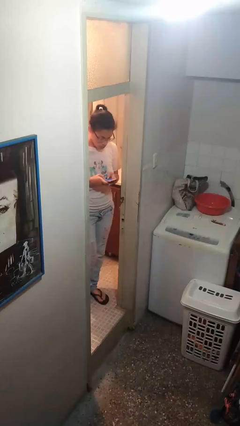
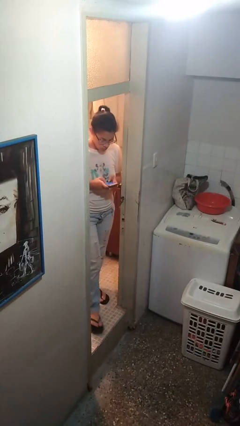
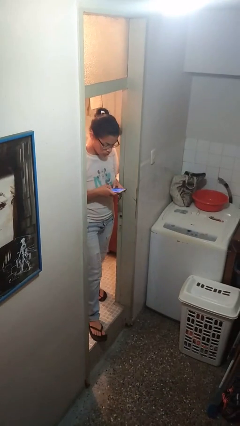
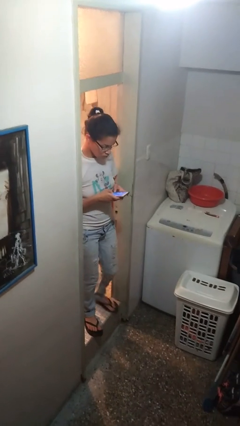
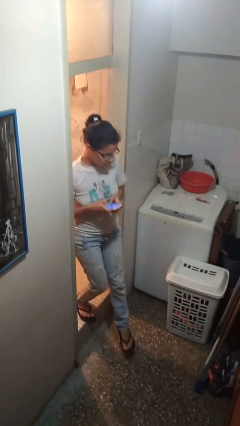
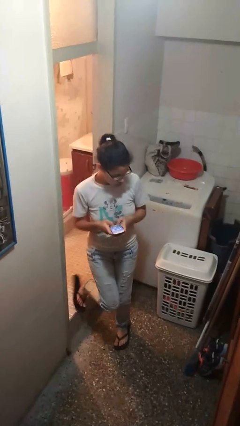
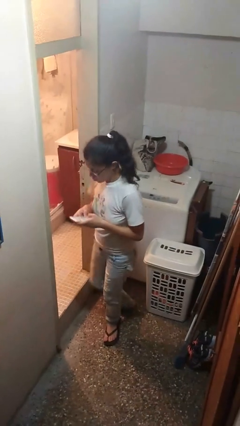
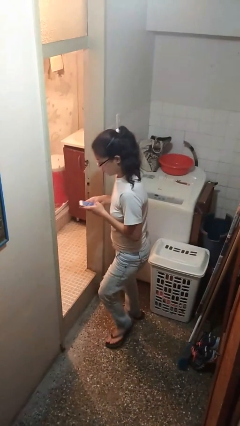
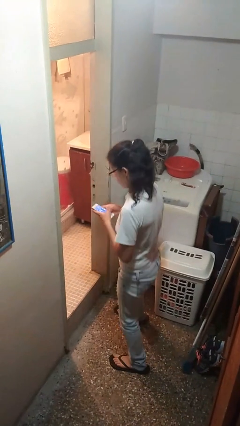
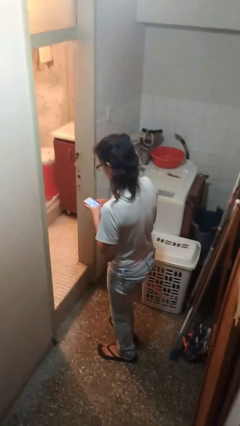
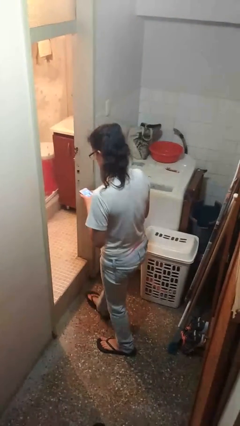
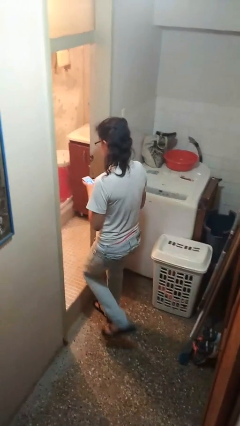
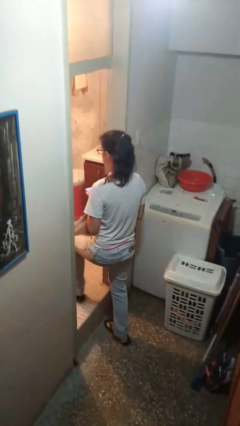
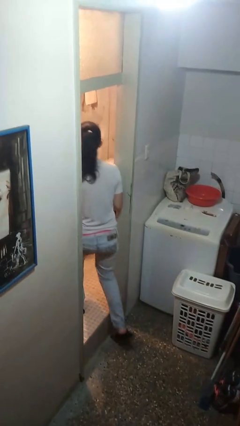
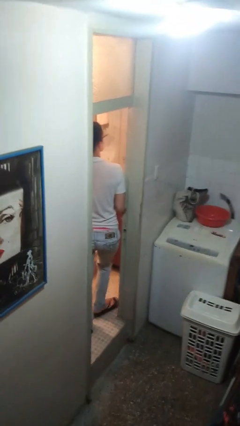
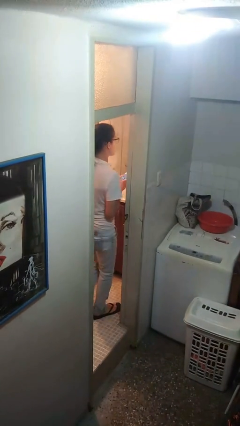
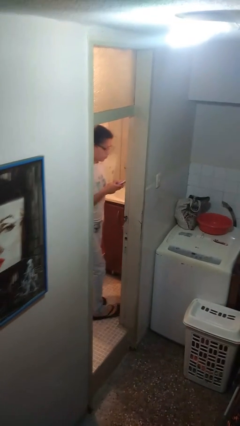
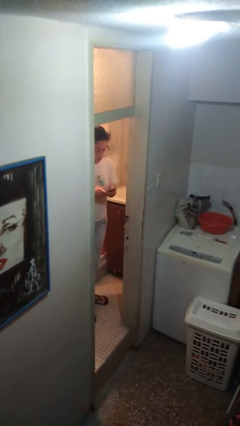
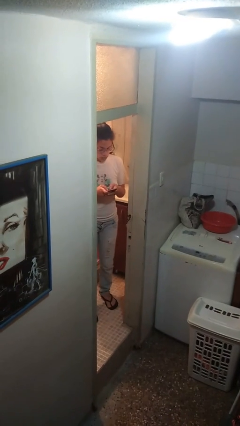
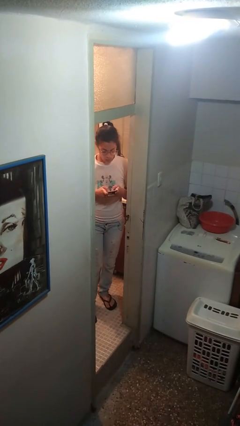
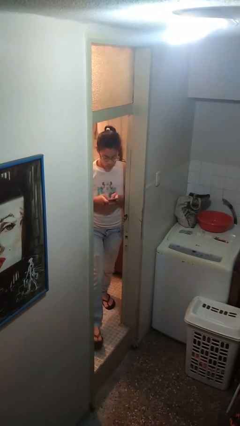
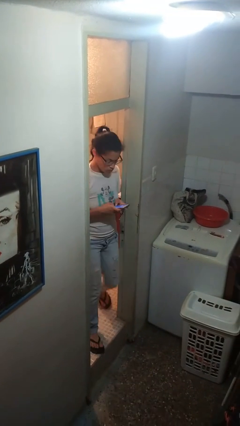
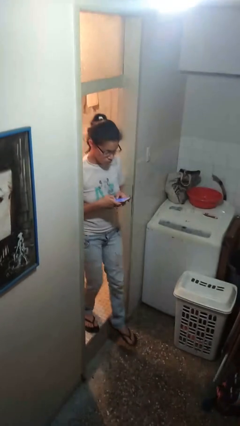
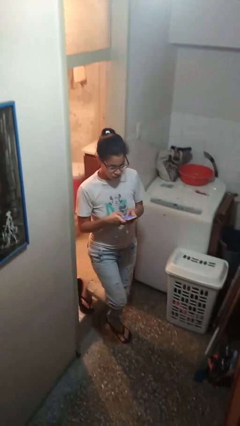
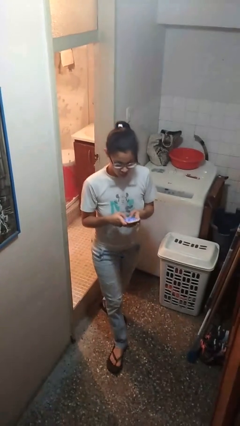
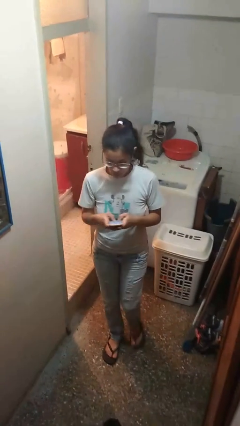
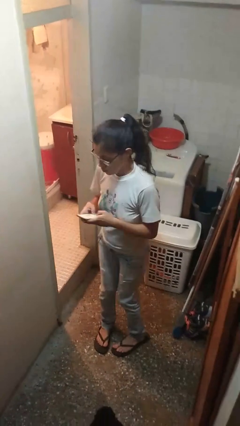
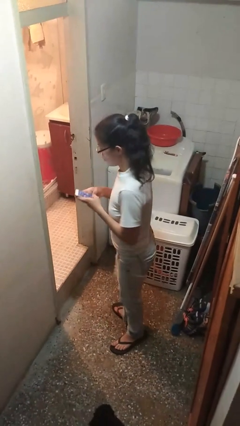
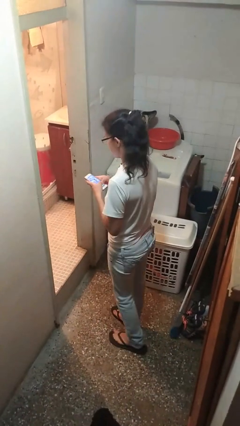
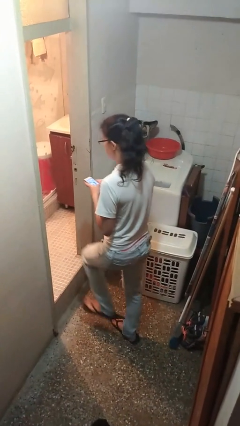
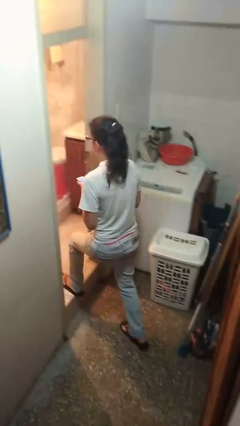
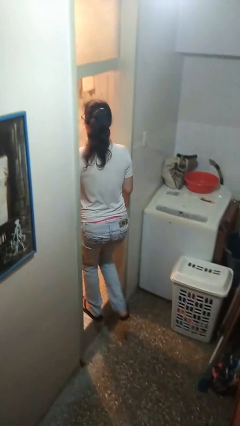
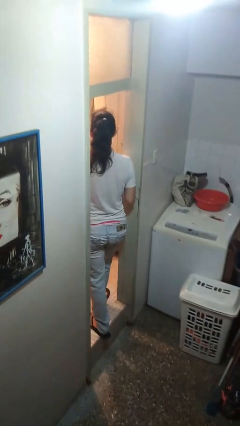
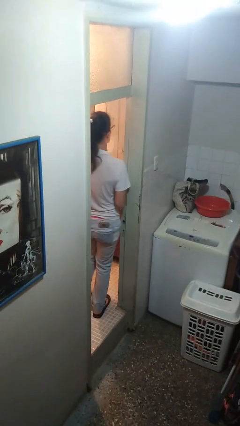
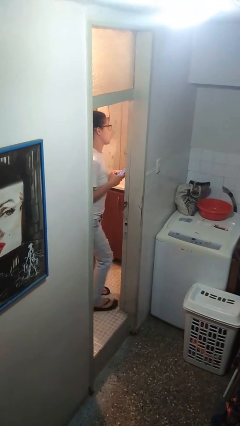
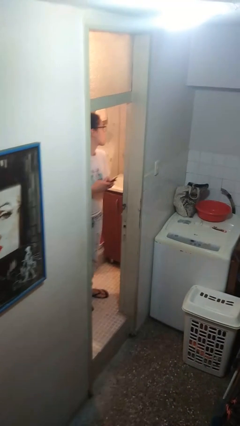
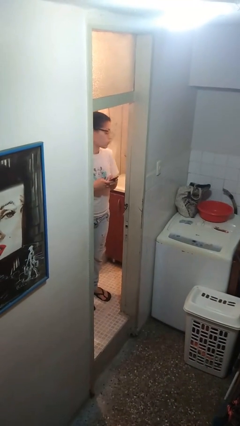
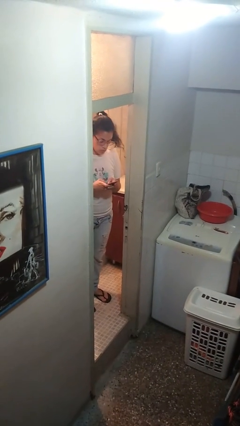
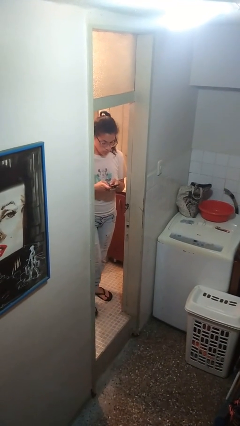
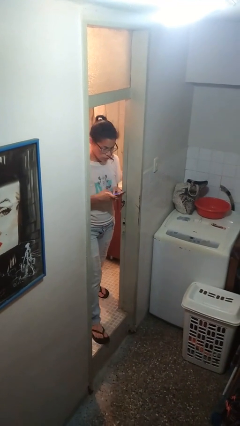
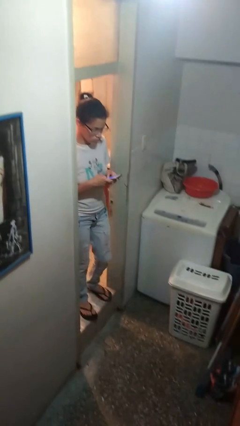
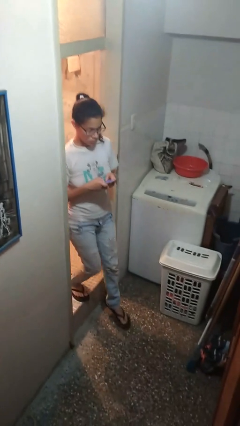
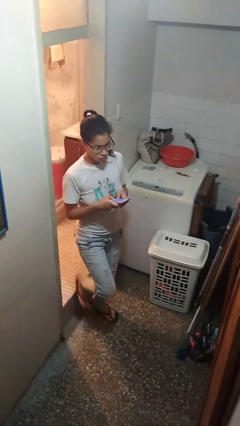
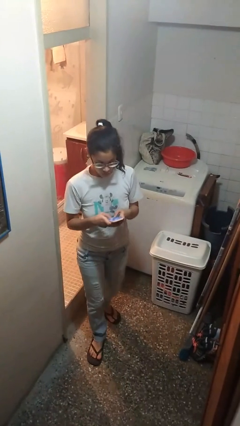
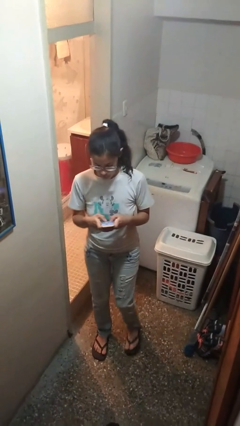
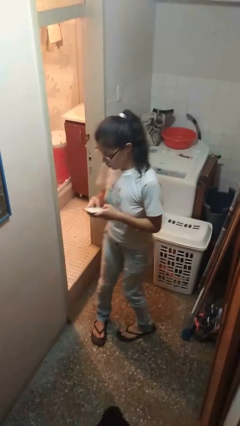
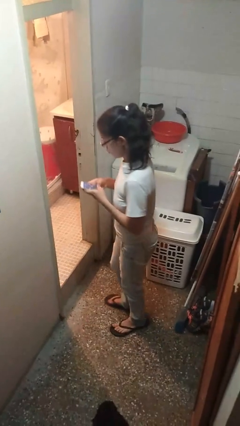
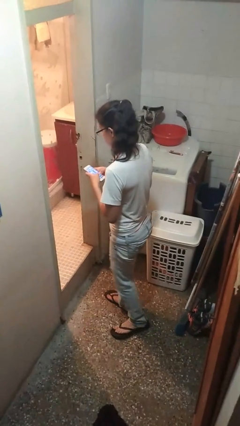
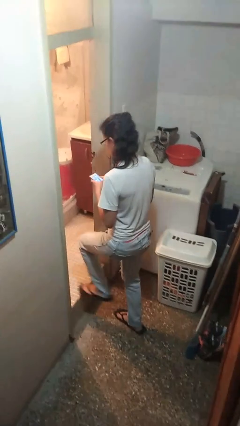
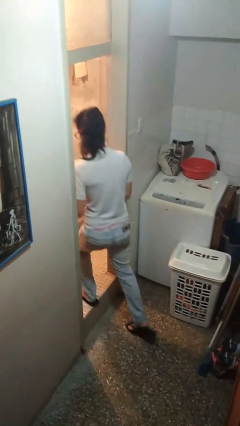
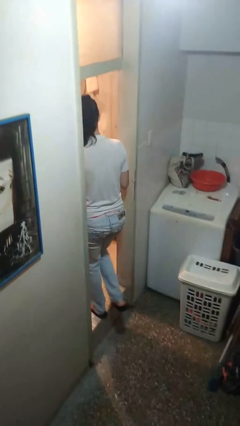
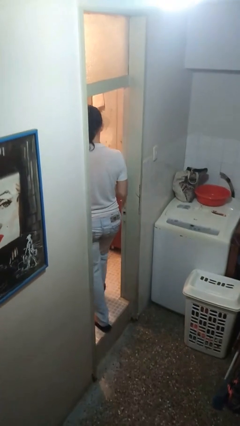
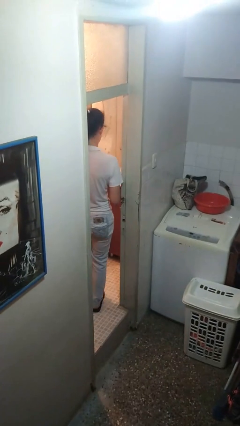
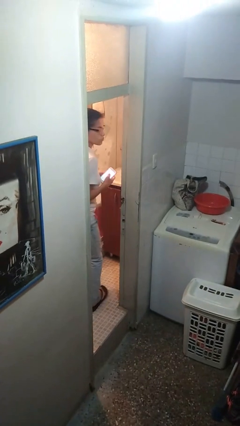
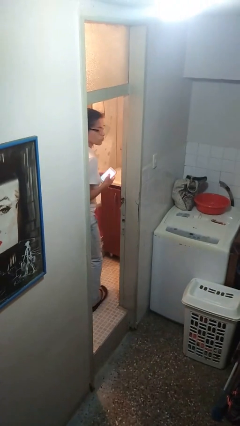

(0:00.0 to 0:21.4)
person texts on phone

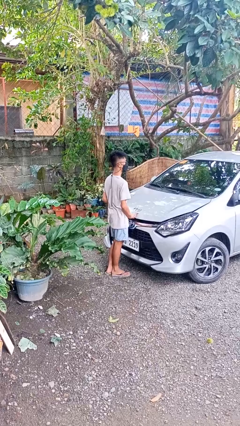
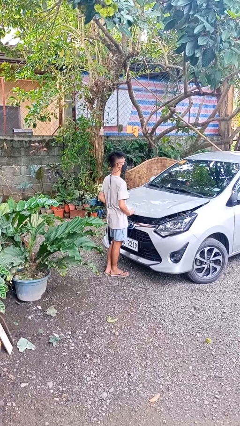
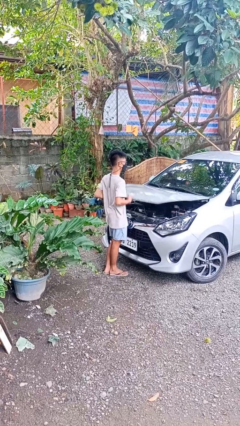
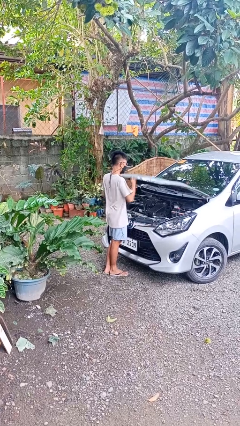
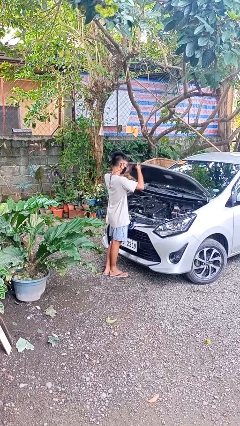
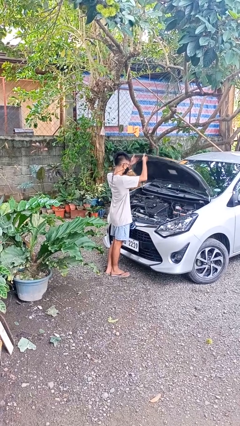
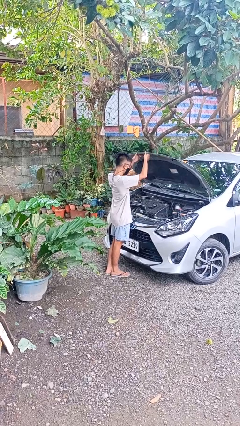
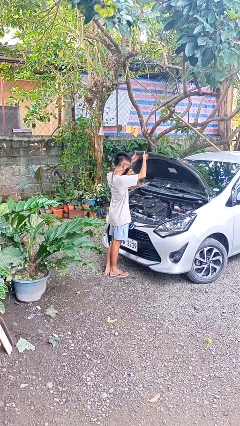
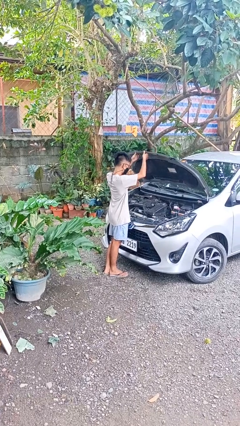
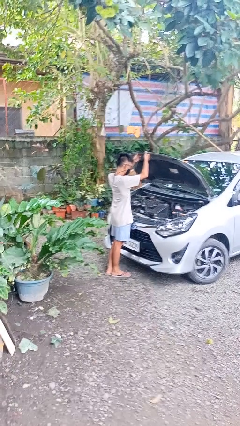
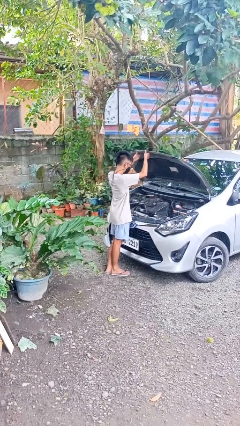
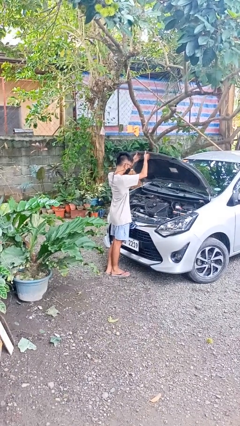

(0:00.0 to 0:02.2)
person opens car hood

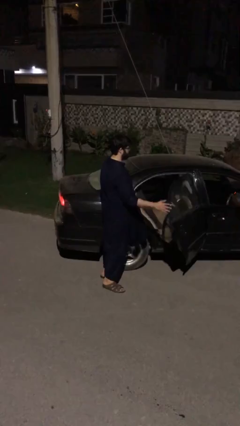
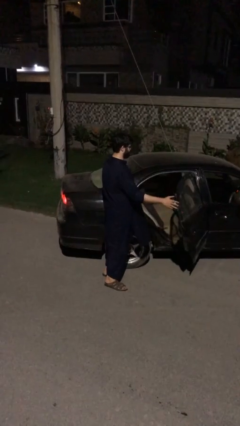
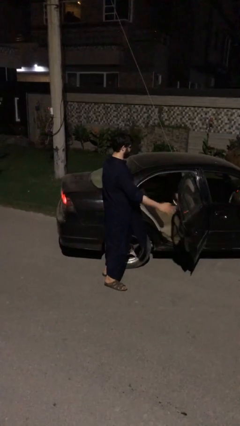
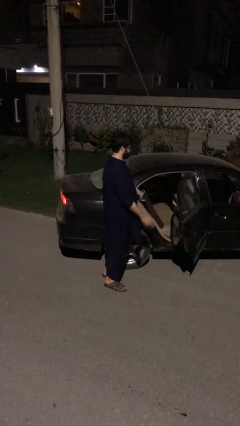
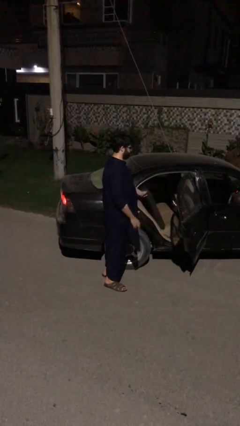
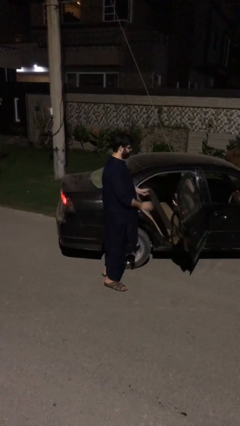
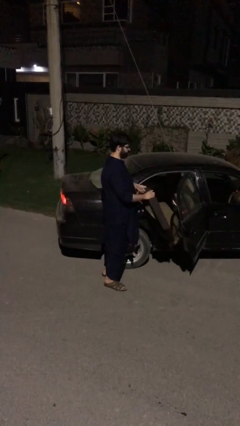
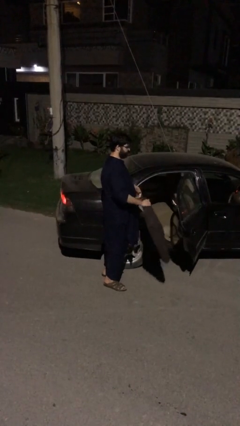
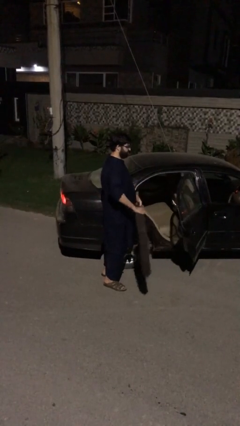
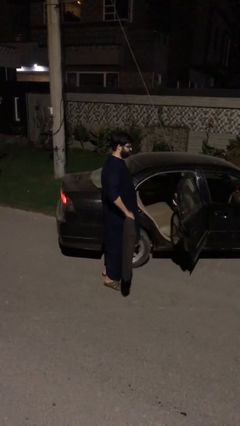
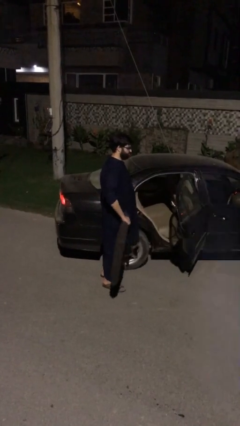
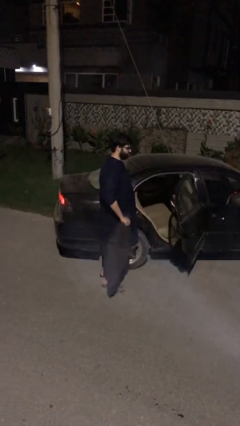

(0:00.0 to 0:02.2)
person unloads car

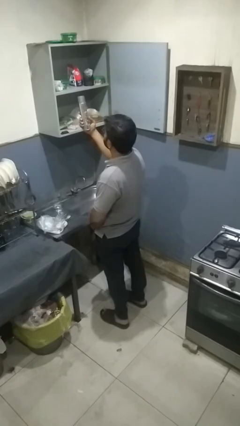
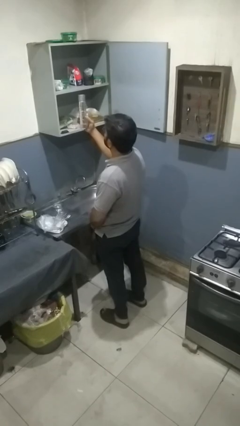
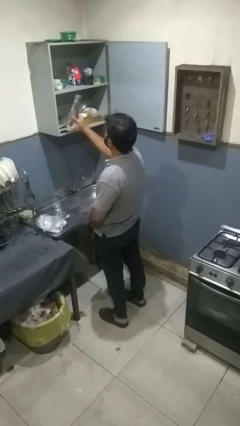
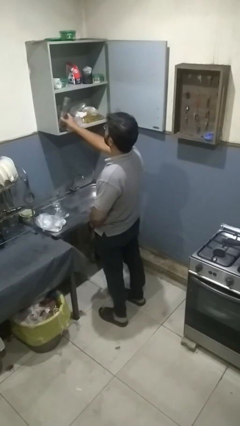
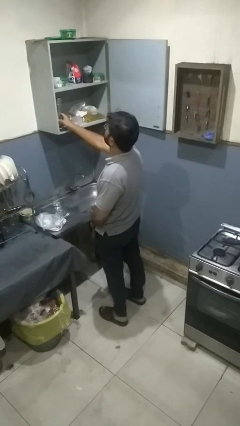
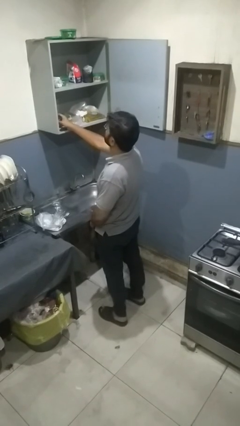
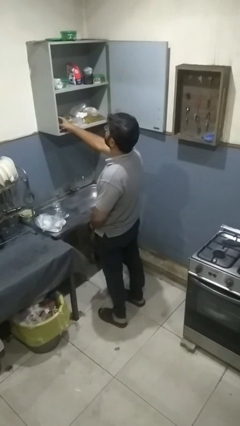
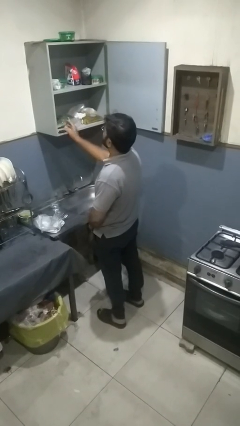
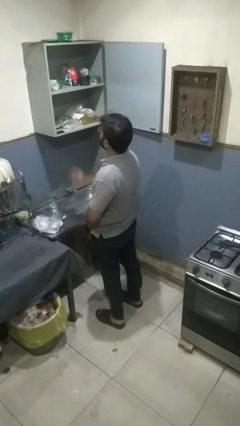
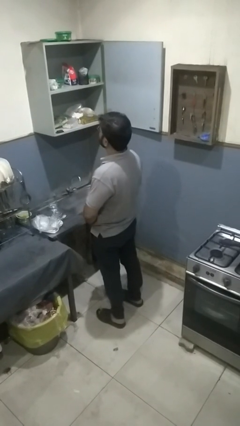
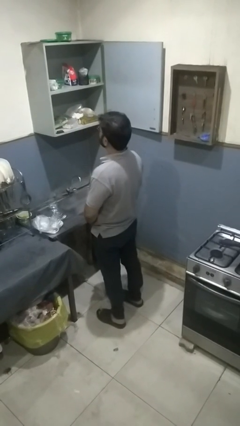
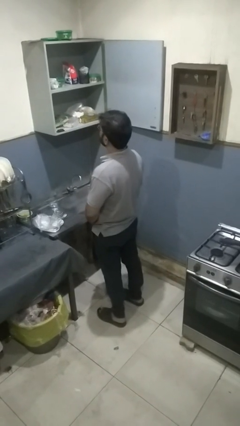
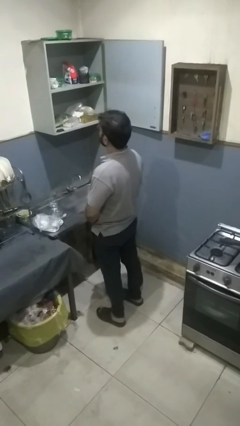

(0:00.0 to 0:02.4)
person puts down object into cabinet
